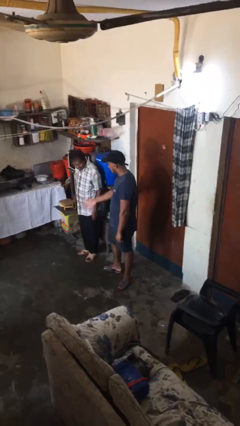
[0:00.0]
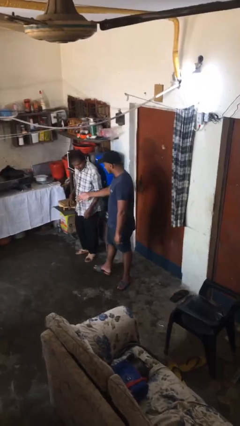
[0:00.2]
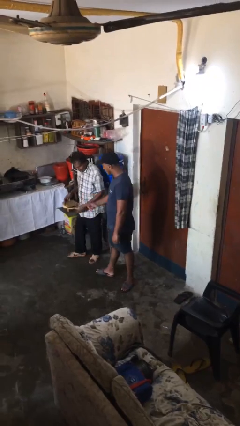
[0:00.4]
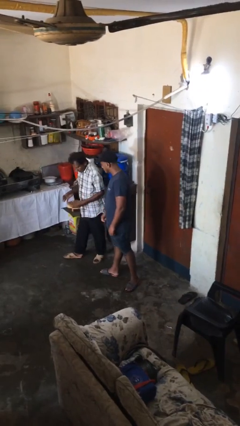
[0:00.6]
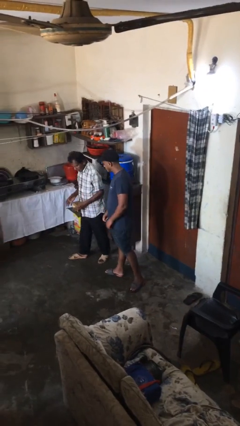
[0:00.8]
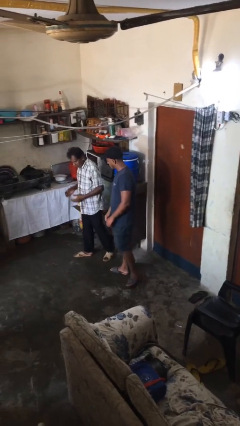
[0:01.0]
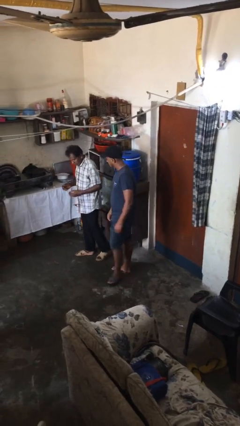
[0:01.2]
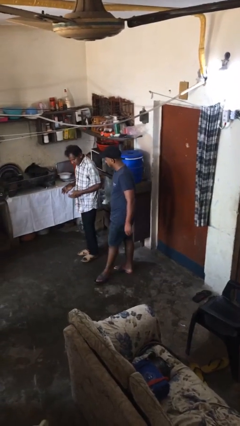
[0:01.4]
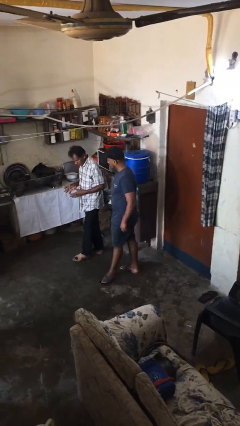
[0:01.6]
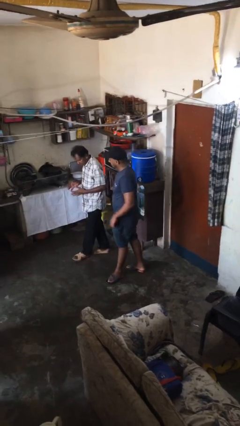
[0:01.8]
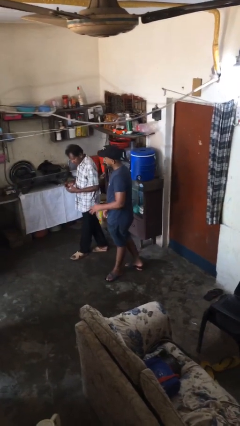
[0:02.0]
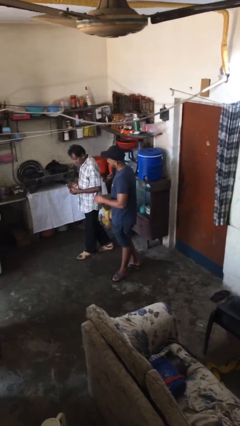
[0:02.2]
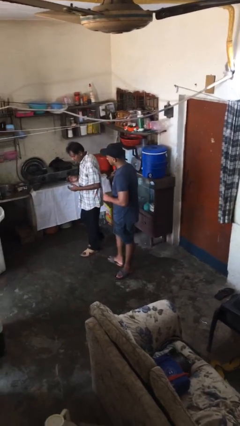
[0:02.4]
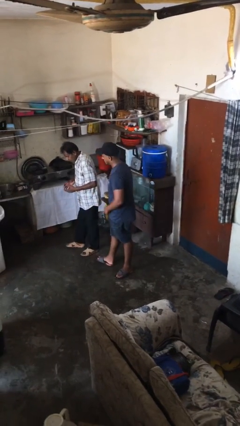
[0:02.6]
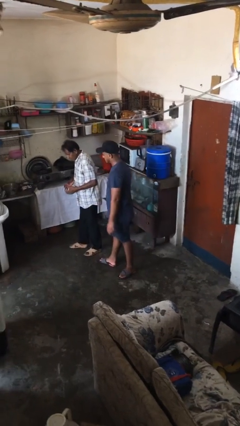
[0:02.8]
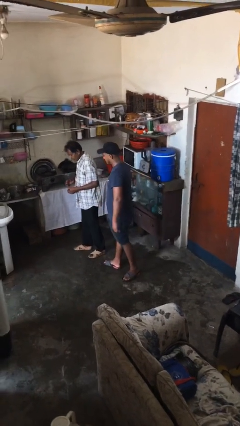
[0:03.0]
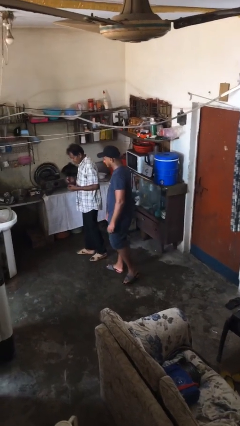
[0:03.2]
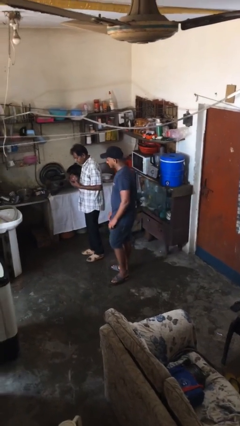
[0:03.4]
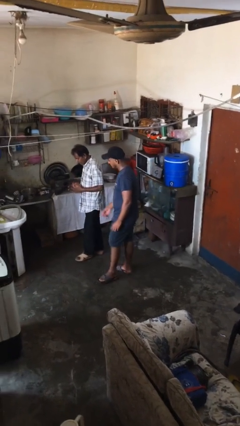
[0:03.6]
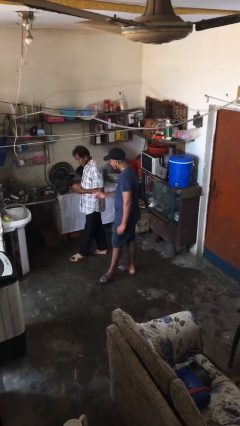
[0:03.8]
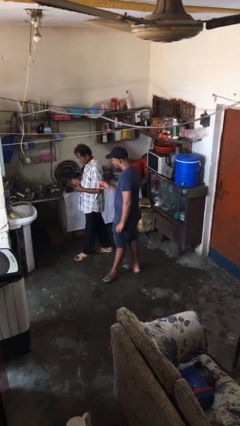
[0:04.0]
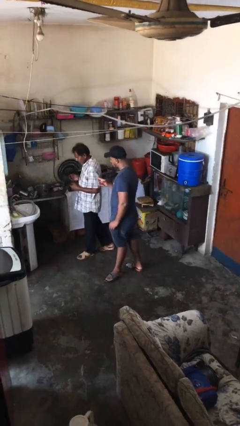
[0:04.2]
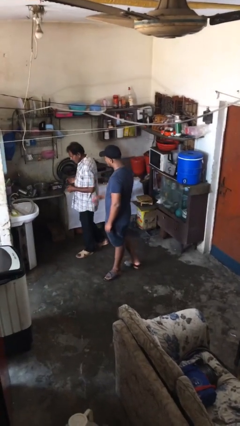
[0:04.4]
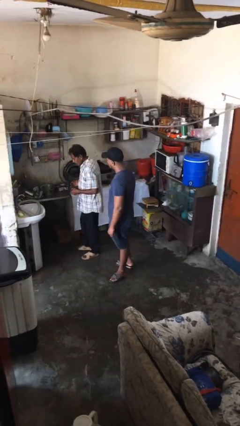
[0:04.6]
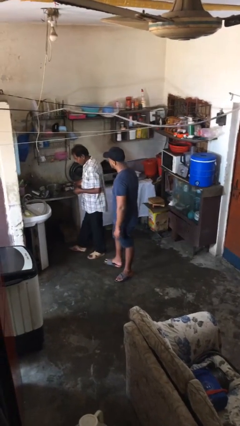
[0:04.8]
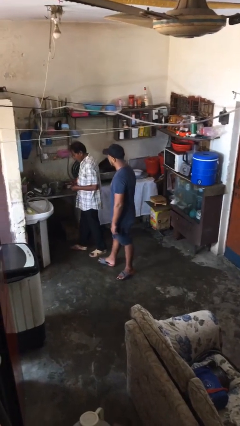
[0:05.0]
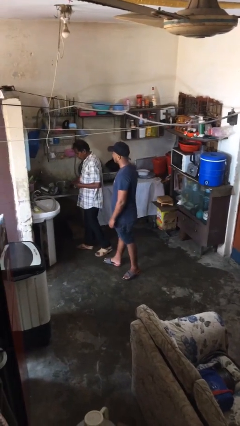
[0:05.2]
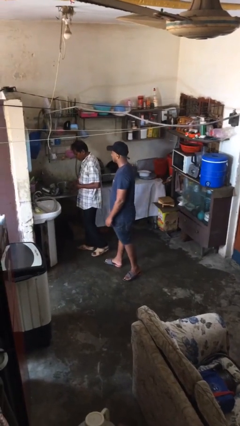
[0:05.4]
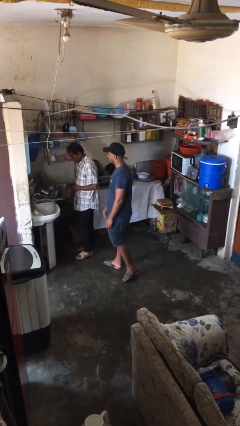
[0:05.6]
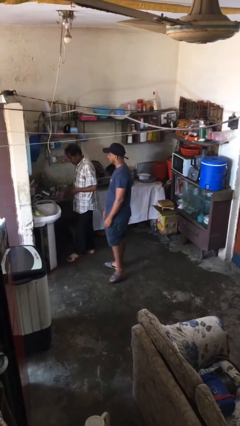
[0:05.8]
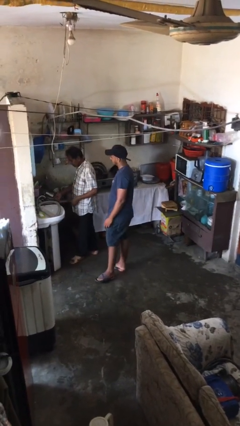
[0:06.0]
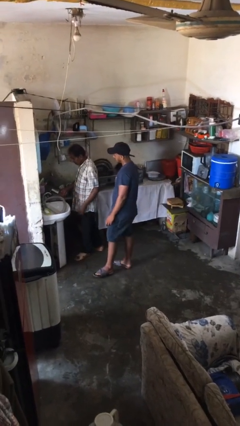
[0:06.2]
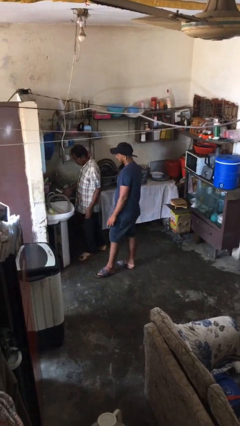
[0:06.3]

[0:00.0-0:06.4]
person talks to person

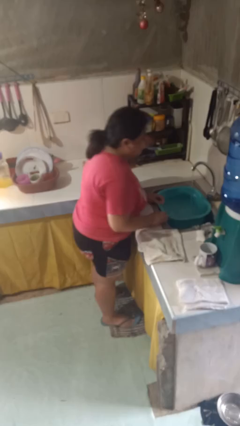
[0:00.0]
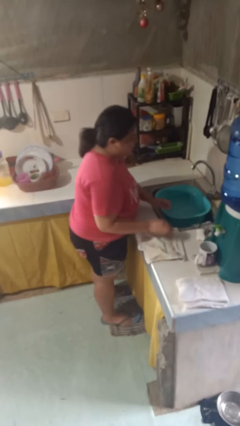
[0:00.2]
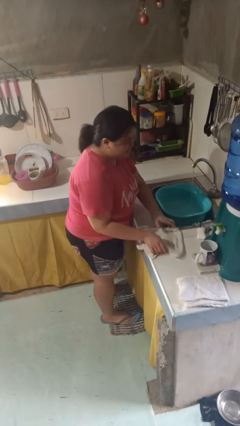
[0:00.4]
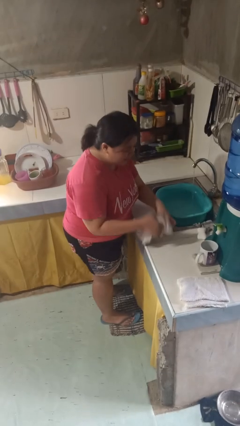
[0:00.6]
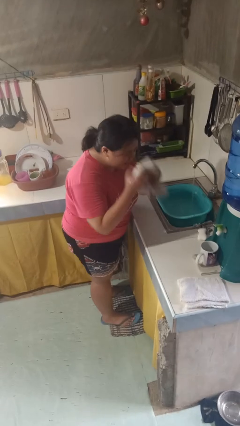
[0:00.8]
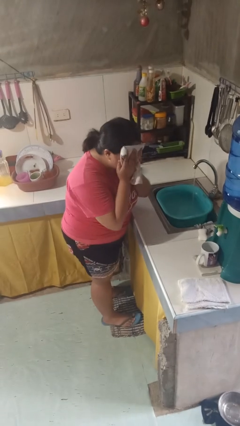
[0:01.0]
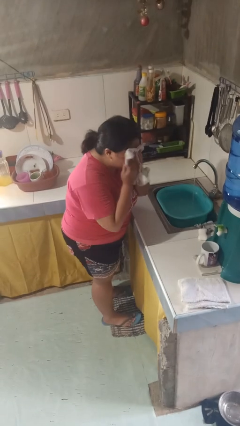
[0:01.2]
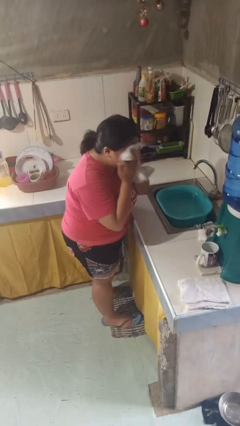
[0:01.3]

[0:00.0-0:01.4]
person dries face with towel

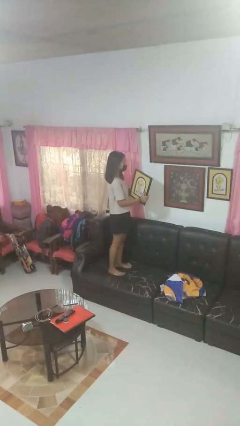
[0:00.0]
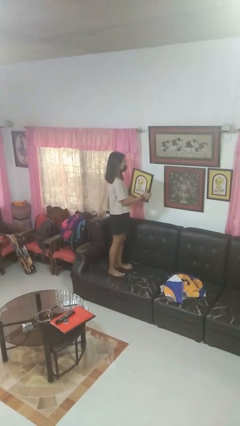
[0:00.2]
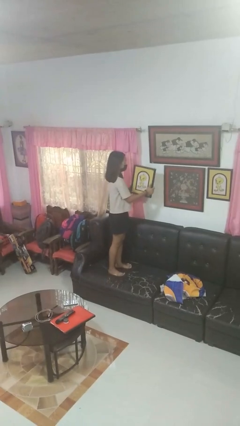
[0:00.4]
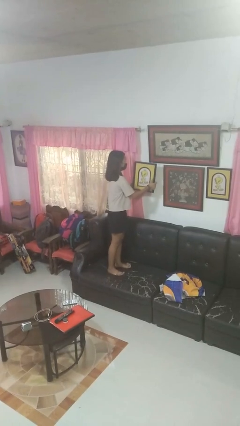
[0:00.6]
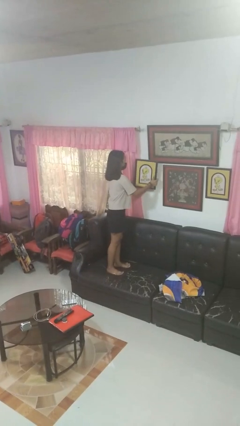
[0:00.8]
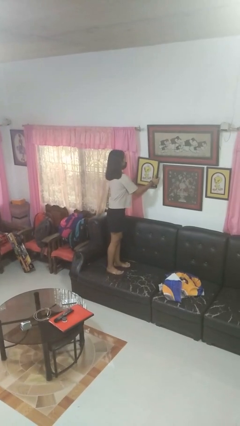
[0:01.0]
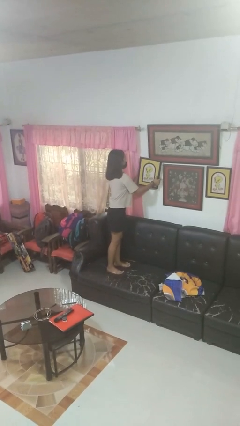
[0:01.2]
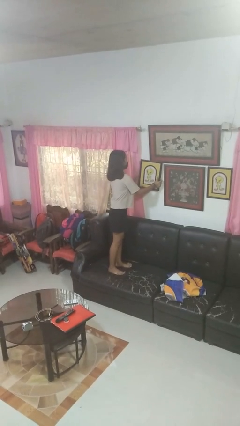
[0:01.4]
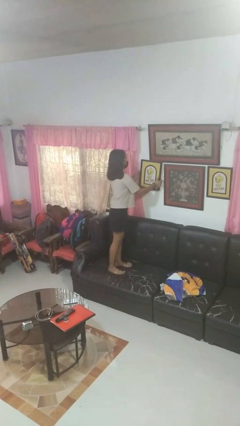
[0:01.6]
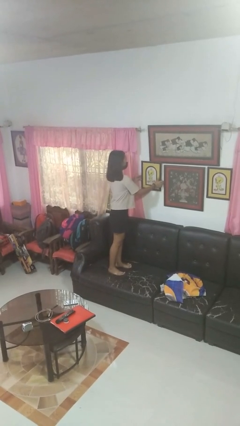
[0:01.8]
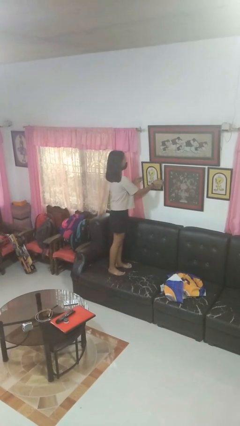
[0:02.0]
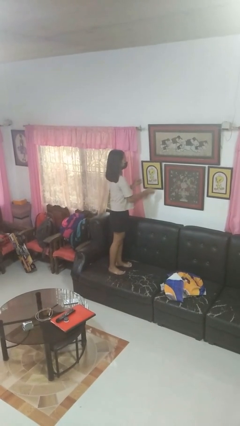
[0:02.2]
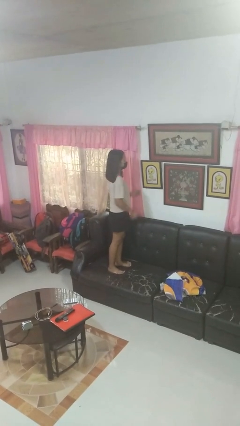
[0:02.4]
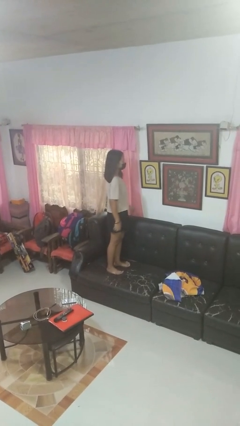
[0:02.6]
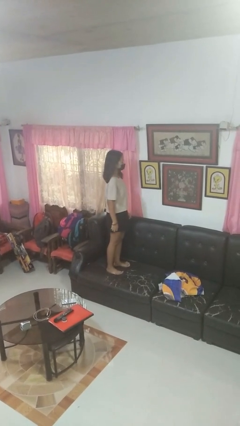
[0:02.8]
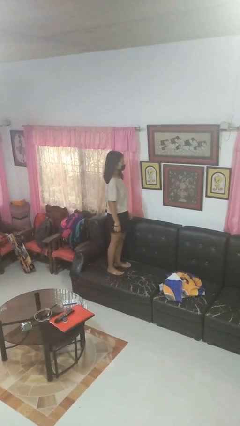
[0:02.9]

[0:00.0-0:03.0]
person puts up picture frame

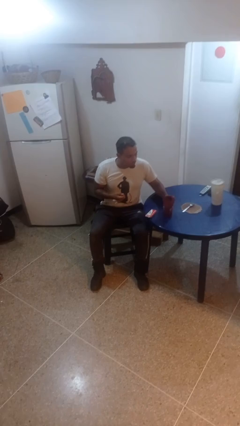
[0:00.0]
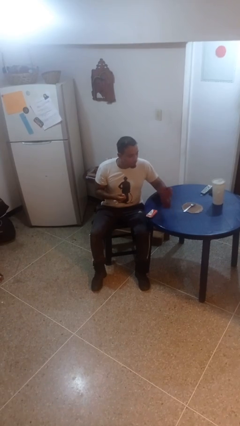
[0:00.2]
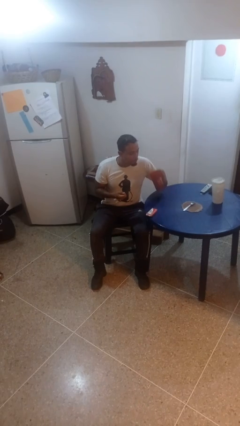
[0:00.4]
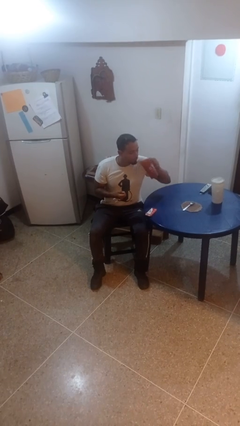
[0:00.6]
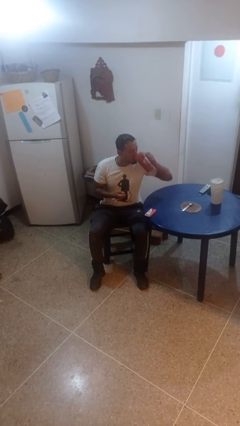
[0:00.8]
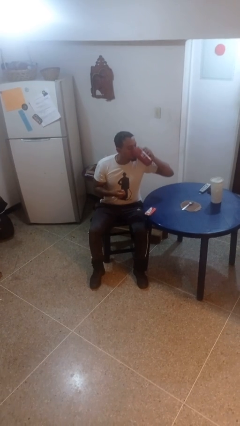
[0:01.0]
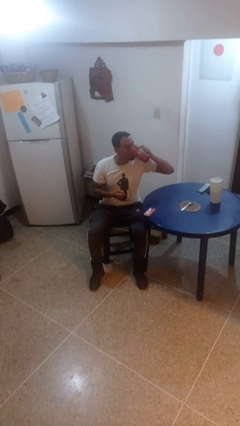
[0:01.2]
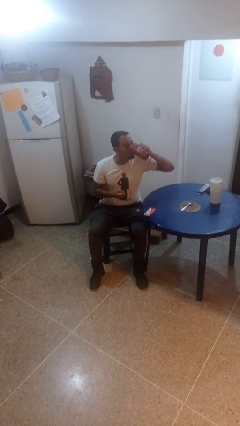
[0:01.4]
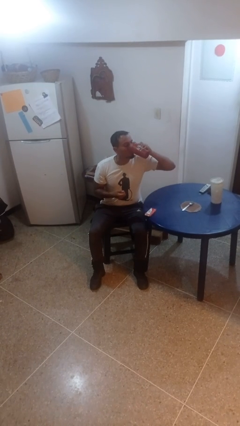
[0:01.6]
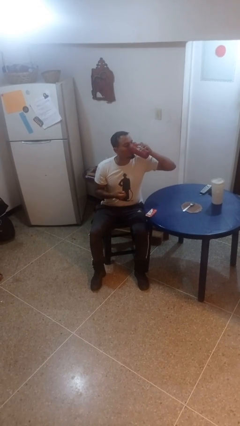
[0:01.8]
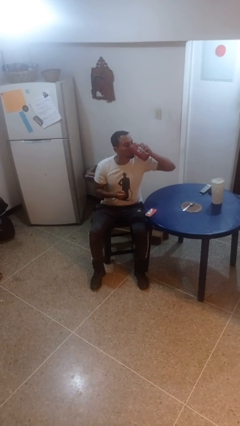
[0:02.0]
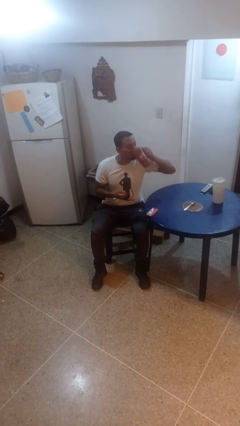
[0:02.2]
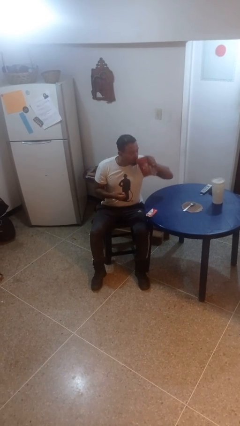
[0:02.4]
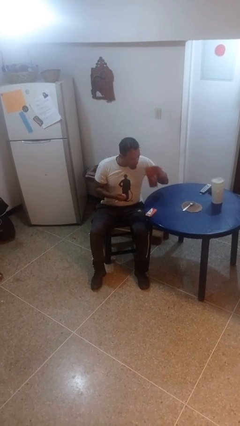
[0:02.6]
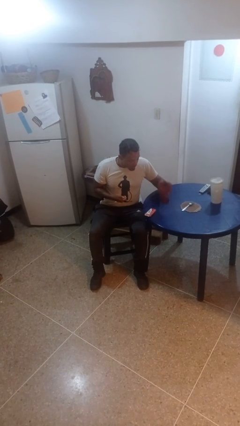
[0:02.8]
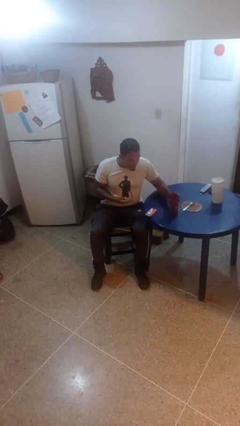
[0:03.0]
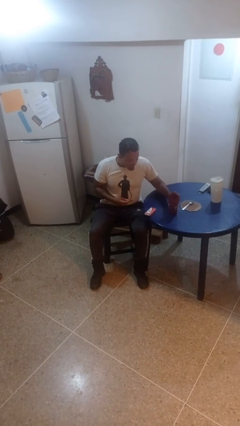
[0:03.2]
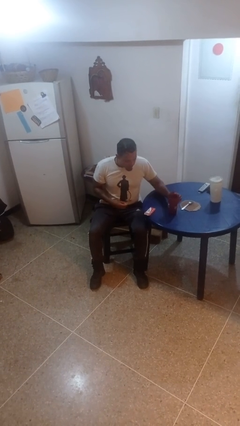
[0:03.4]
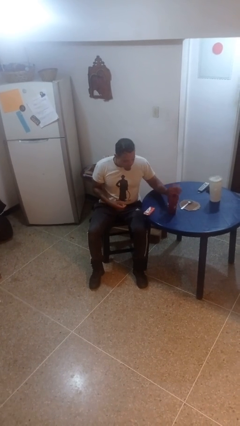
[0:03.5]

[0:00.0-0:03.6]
person drinks from cup

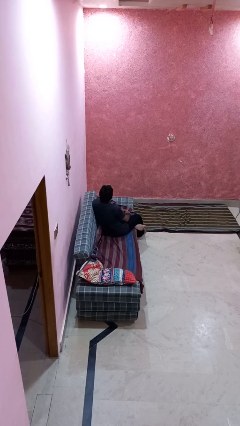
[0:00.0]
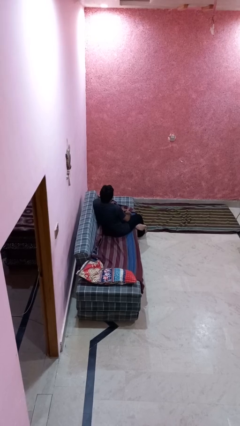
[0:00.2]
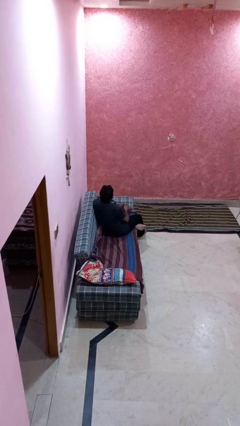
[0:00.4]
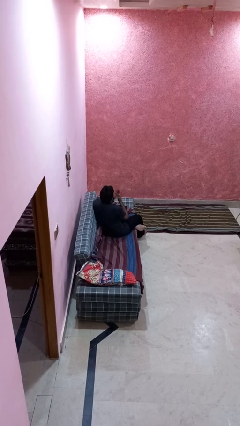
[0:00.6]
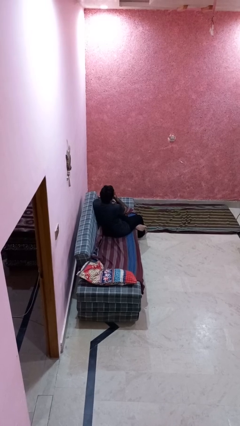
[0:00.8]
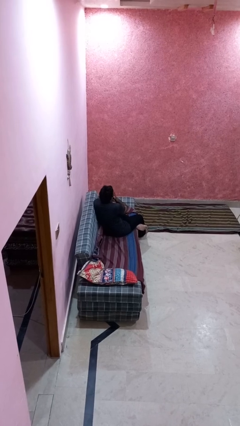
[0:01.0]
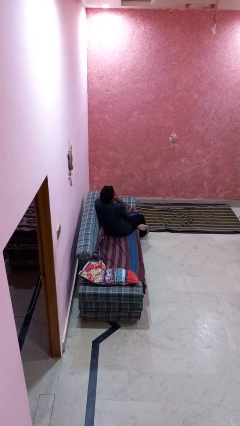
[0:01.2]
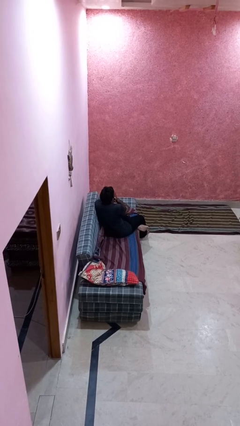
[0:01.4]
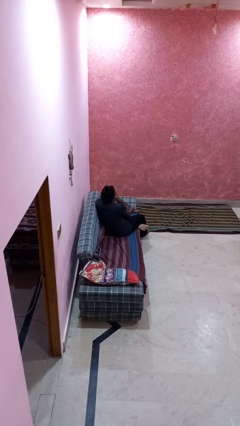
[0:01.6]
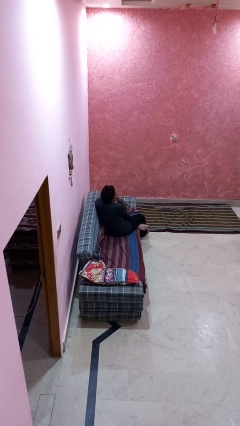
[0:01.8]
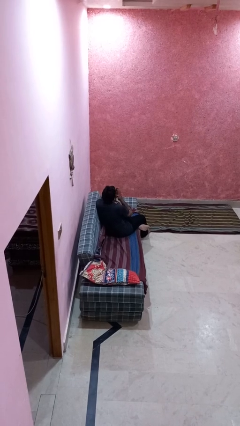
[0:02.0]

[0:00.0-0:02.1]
person covers face with hands

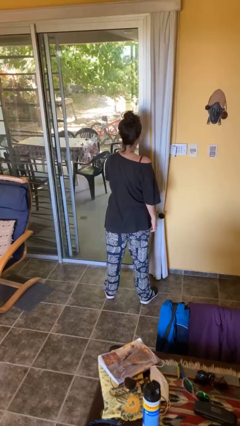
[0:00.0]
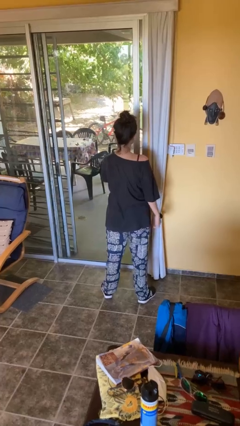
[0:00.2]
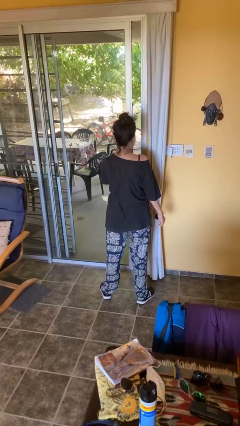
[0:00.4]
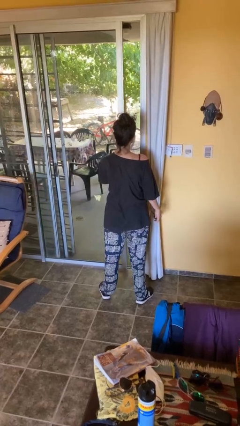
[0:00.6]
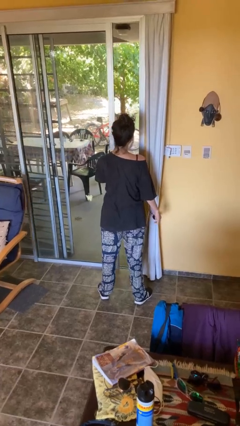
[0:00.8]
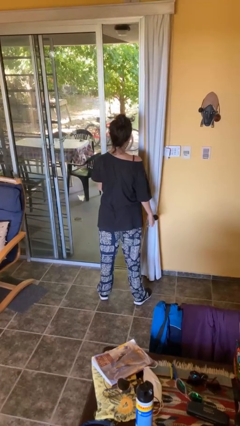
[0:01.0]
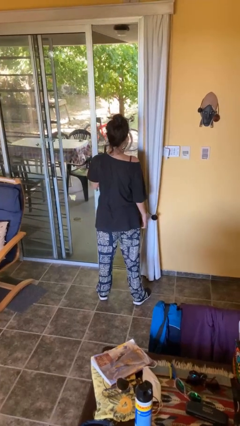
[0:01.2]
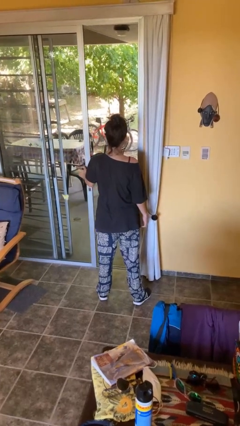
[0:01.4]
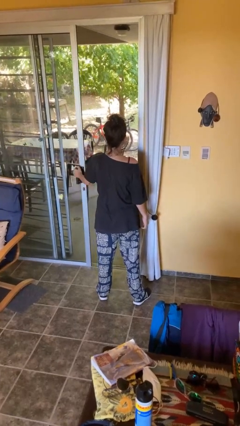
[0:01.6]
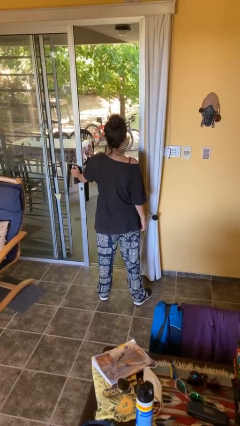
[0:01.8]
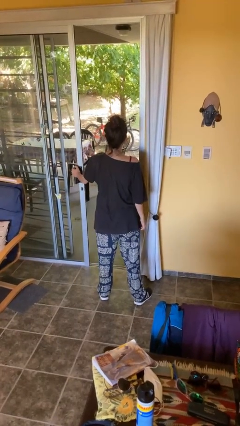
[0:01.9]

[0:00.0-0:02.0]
person opens facility door
